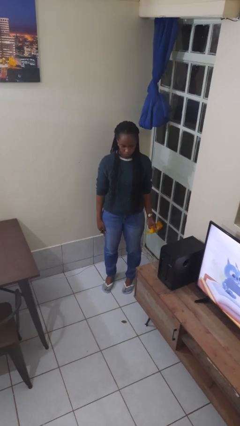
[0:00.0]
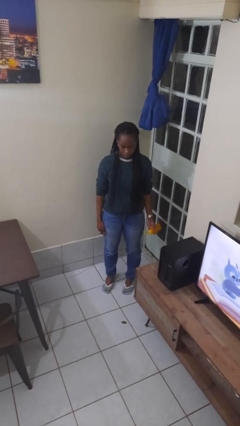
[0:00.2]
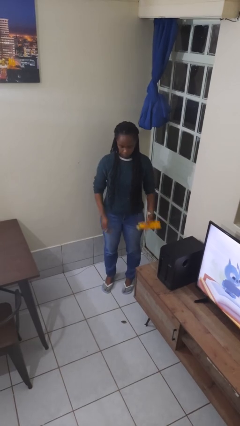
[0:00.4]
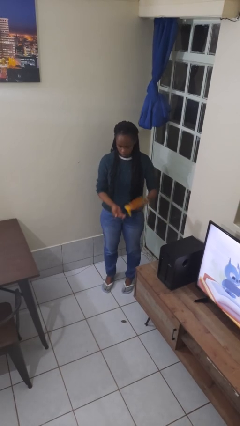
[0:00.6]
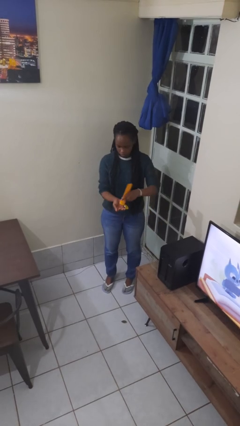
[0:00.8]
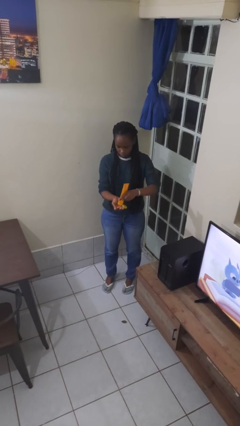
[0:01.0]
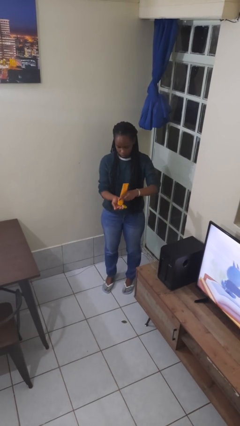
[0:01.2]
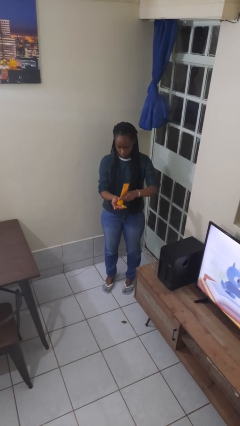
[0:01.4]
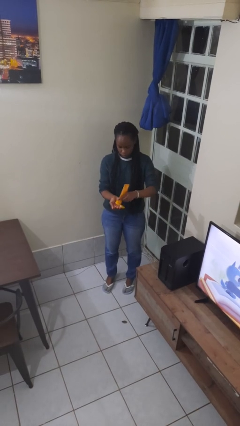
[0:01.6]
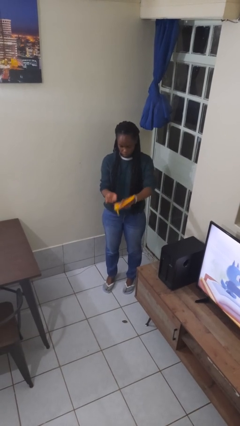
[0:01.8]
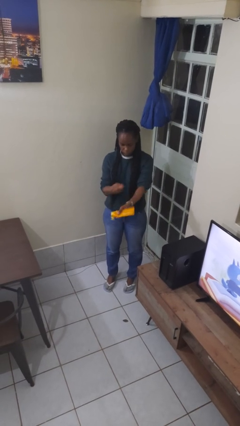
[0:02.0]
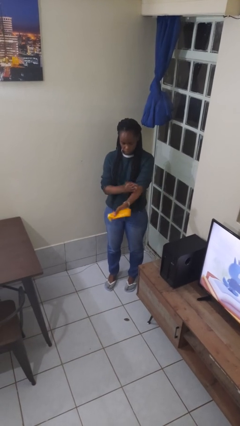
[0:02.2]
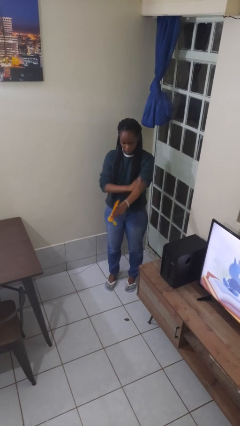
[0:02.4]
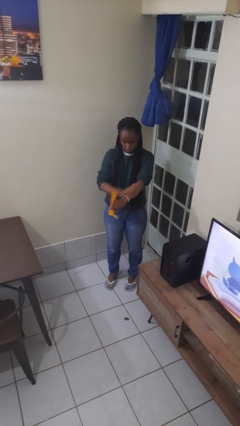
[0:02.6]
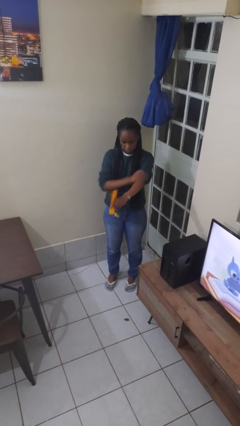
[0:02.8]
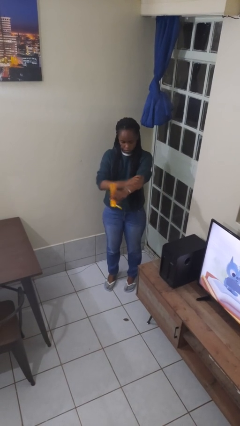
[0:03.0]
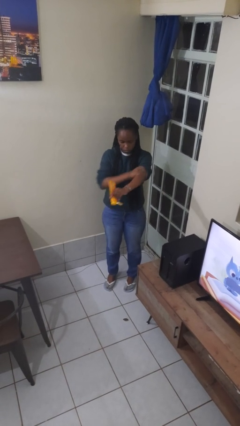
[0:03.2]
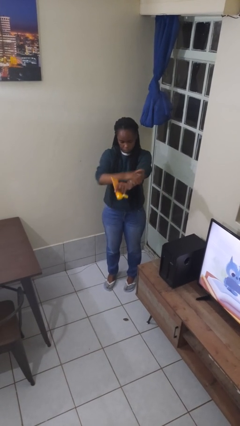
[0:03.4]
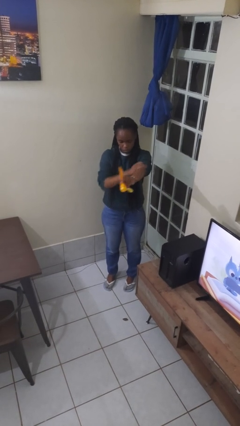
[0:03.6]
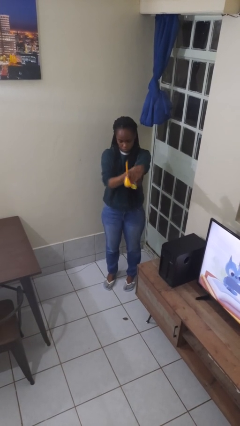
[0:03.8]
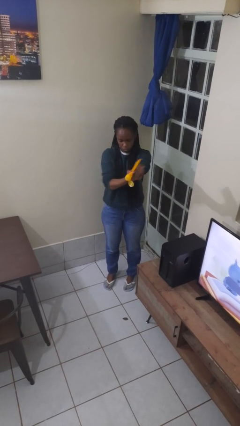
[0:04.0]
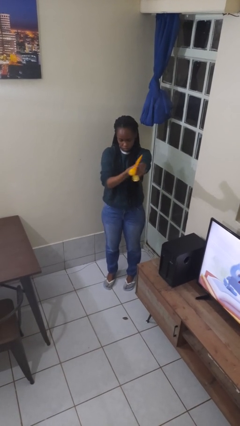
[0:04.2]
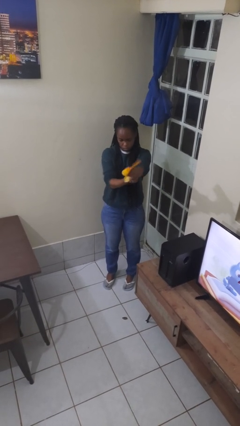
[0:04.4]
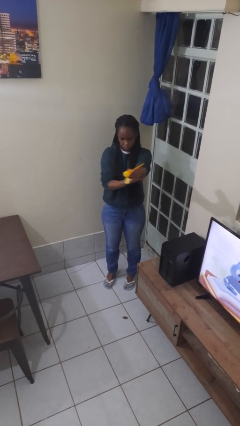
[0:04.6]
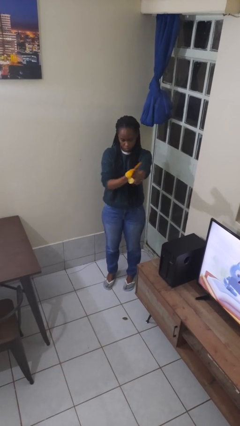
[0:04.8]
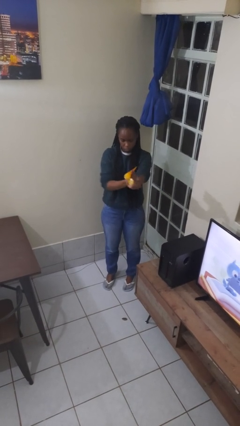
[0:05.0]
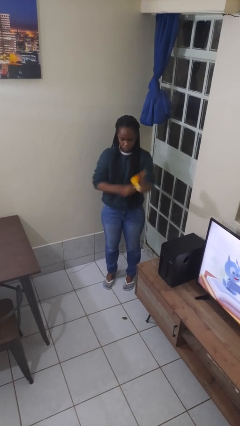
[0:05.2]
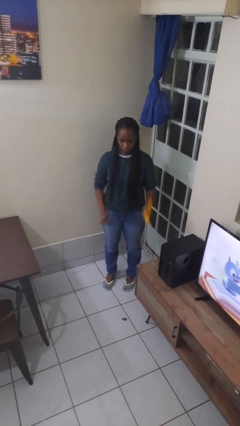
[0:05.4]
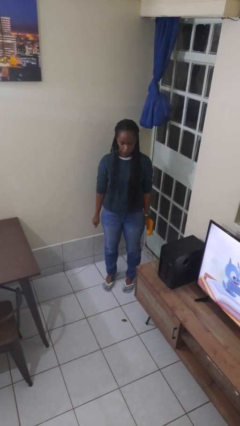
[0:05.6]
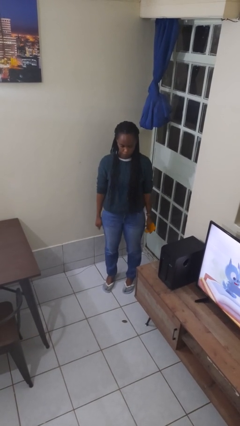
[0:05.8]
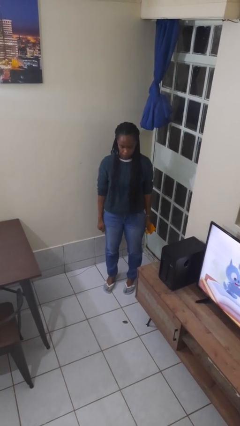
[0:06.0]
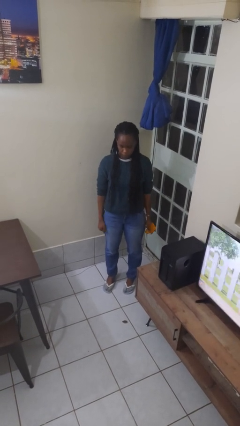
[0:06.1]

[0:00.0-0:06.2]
person applies sunscreen

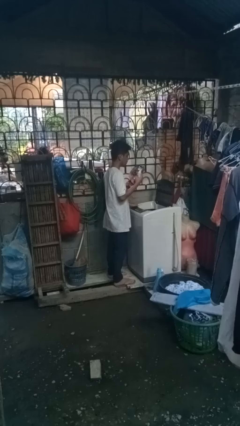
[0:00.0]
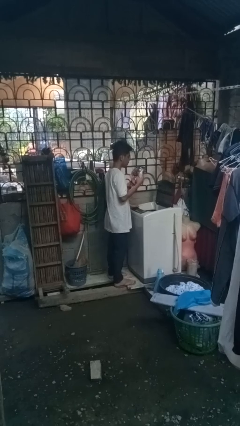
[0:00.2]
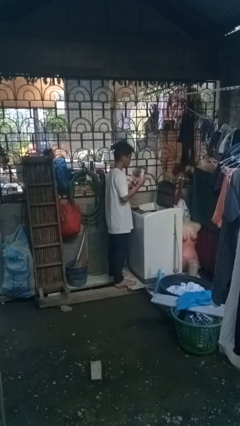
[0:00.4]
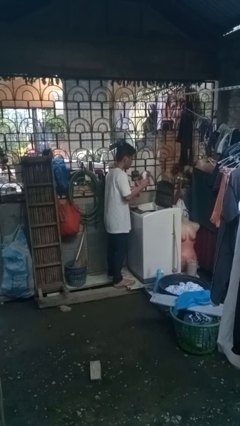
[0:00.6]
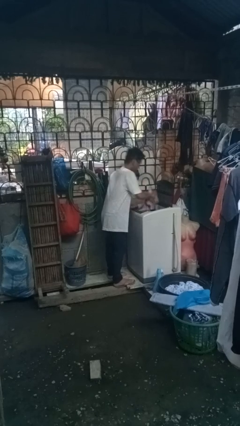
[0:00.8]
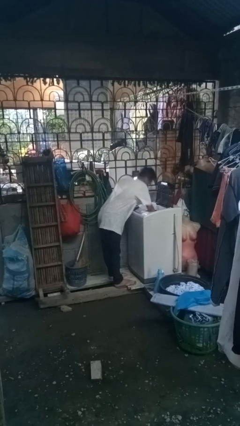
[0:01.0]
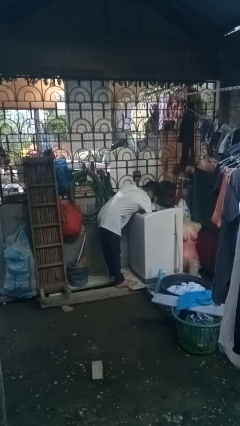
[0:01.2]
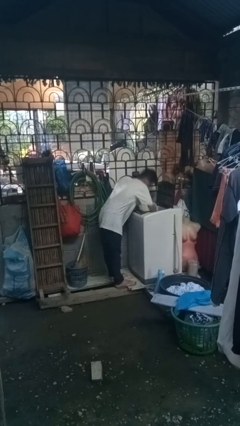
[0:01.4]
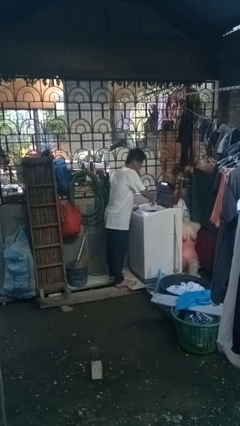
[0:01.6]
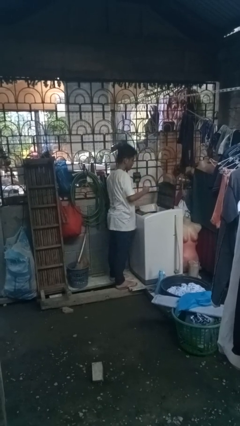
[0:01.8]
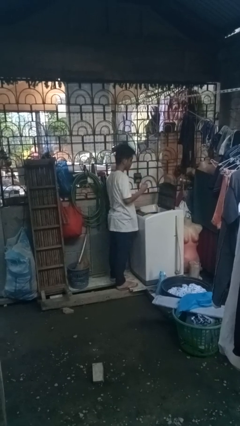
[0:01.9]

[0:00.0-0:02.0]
person loads dryer

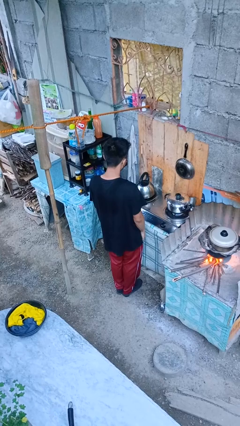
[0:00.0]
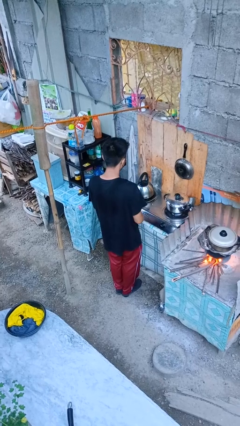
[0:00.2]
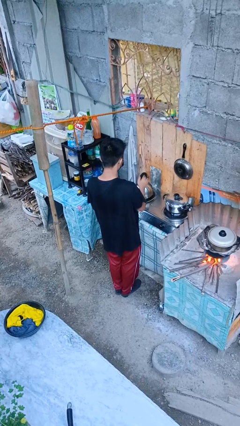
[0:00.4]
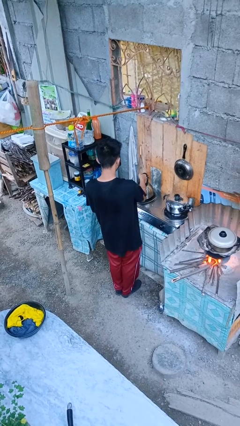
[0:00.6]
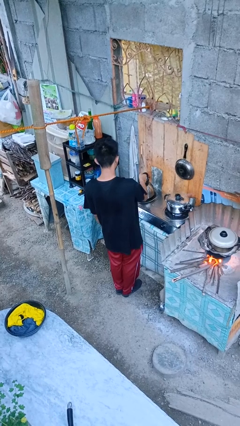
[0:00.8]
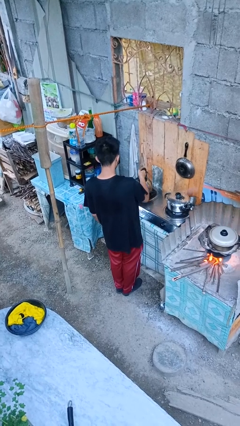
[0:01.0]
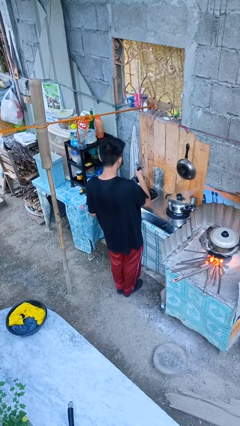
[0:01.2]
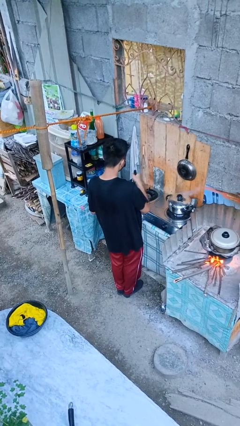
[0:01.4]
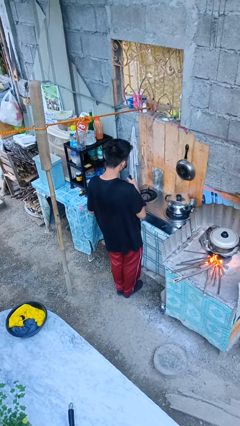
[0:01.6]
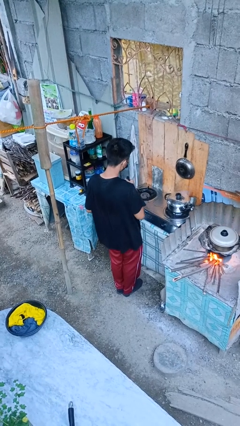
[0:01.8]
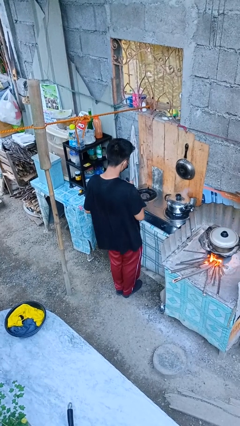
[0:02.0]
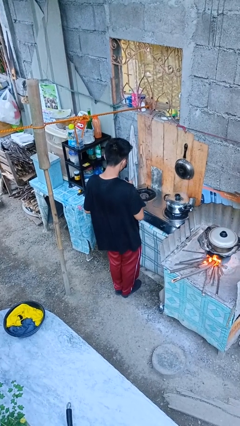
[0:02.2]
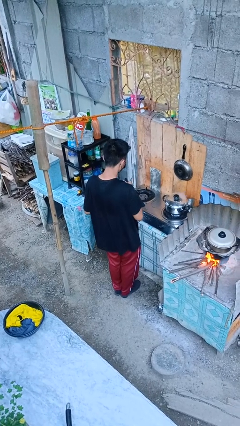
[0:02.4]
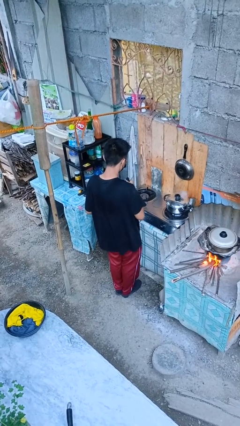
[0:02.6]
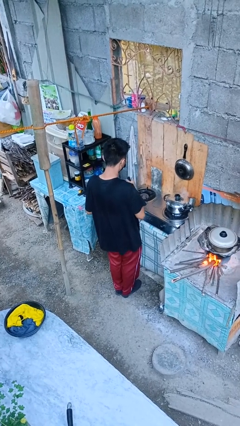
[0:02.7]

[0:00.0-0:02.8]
person picks up object from countertop

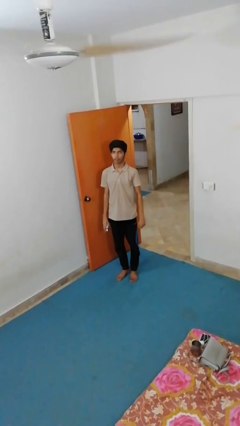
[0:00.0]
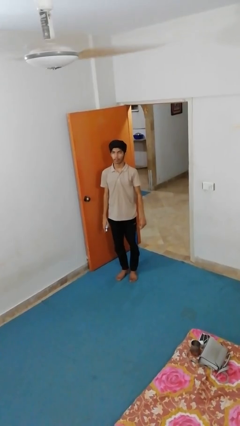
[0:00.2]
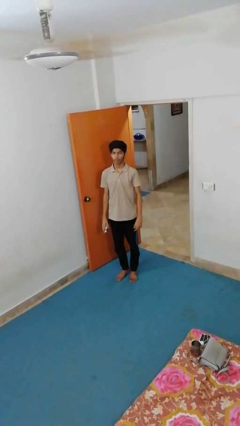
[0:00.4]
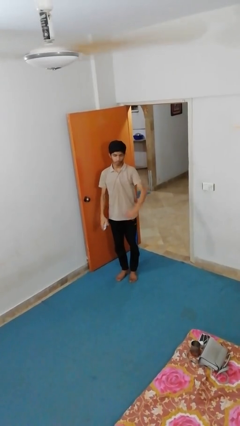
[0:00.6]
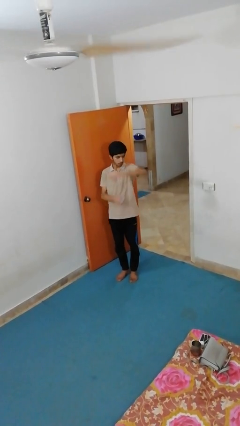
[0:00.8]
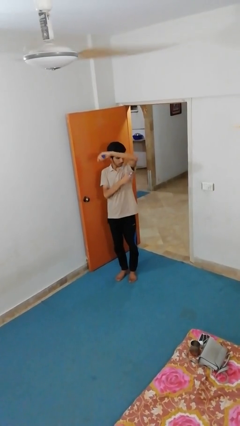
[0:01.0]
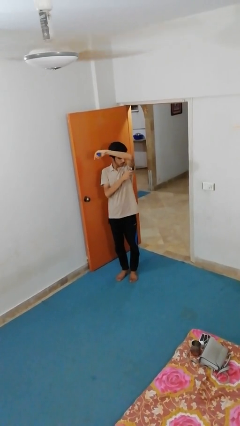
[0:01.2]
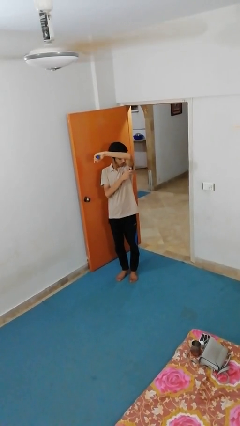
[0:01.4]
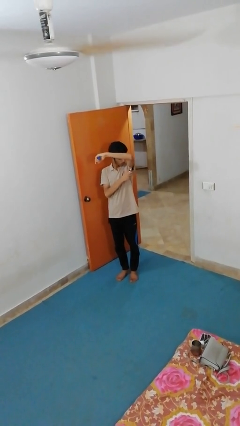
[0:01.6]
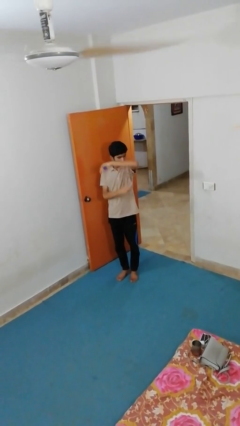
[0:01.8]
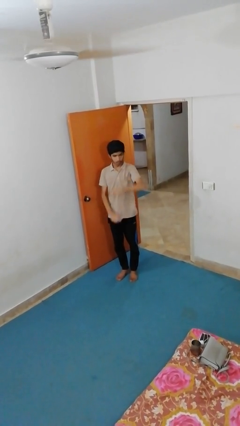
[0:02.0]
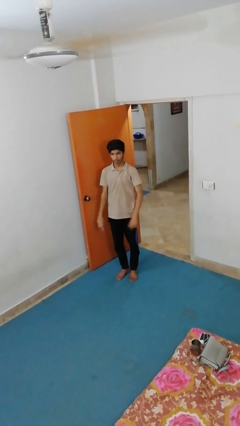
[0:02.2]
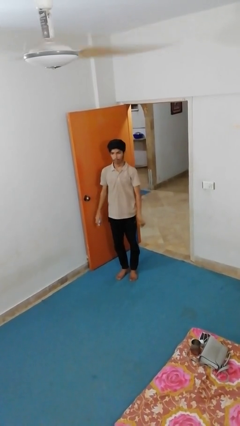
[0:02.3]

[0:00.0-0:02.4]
person applies deodorant

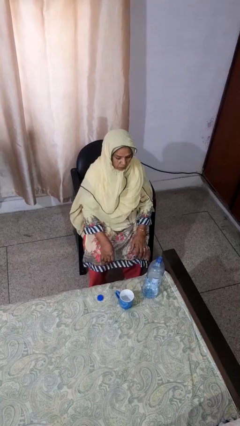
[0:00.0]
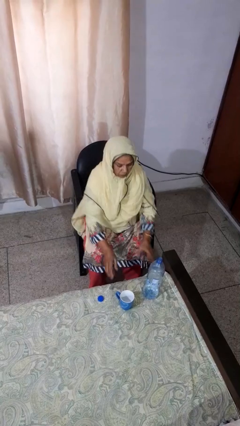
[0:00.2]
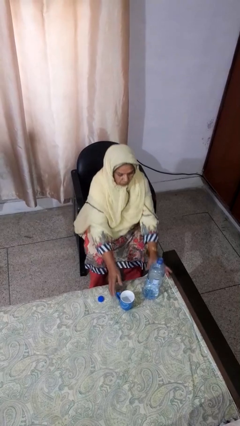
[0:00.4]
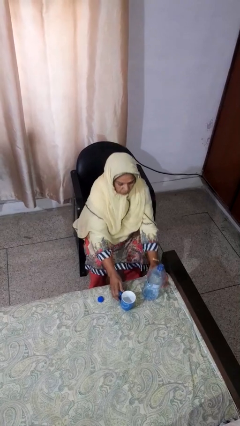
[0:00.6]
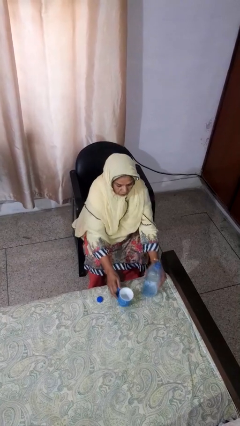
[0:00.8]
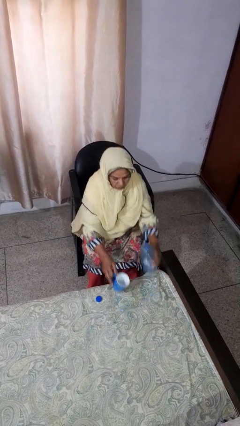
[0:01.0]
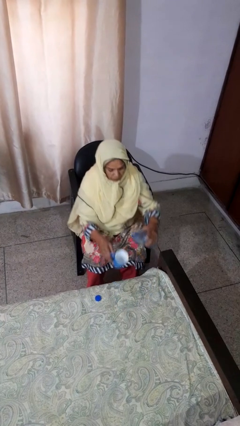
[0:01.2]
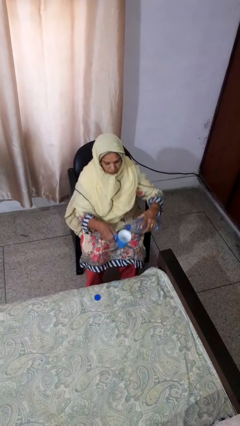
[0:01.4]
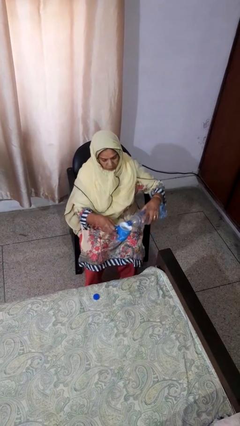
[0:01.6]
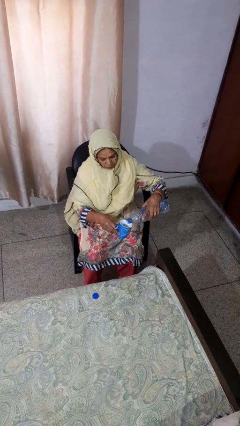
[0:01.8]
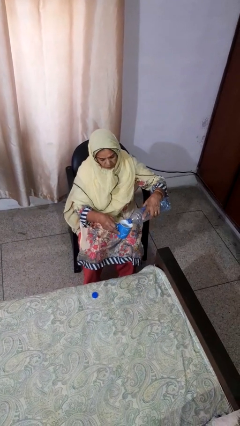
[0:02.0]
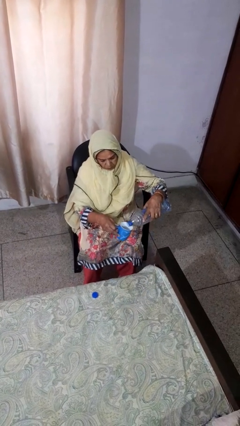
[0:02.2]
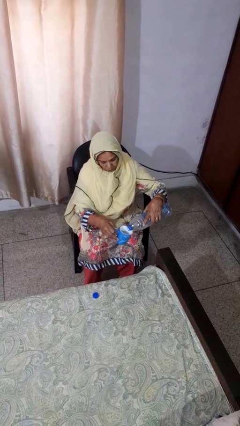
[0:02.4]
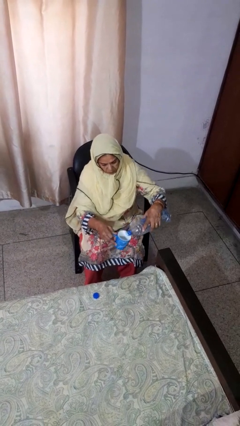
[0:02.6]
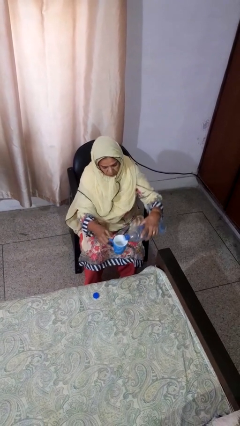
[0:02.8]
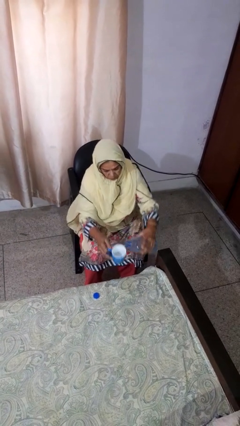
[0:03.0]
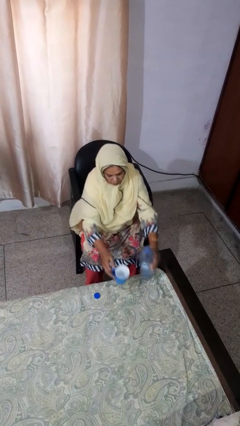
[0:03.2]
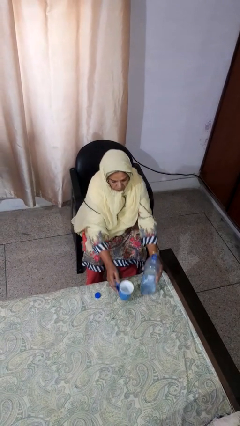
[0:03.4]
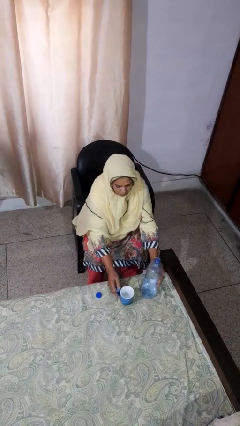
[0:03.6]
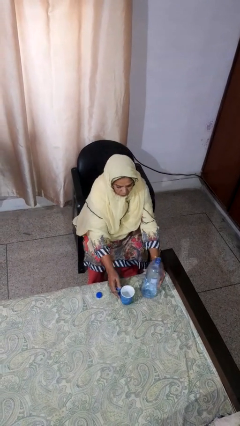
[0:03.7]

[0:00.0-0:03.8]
person pours liquid into cup
